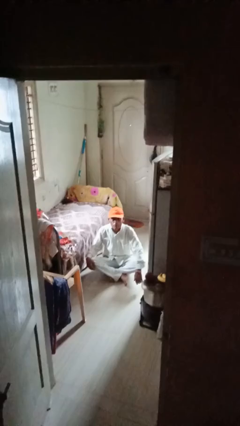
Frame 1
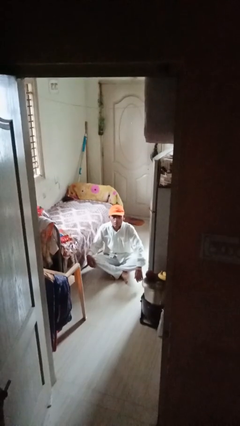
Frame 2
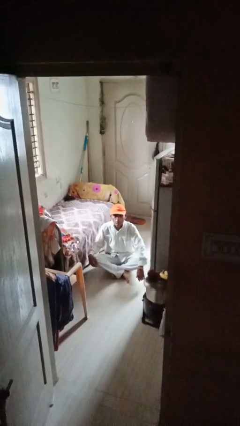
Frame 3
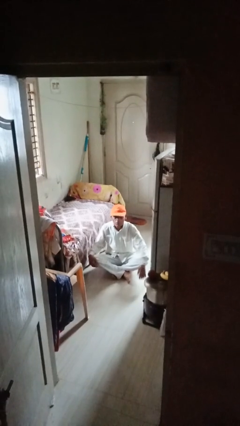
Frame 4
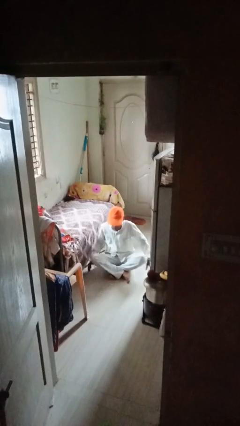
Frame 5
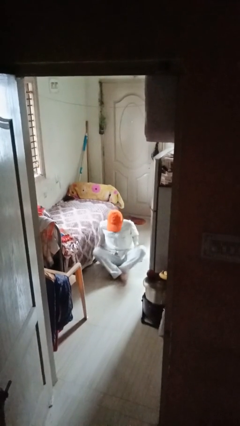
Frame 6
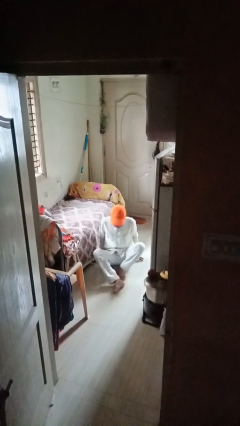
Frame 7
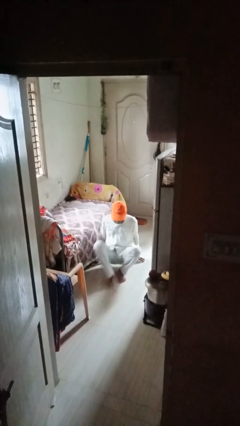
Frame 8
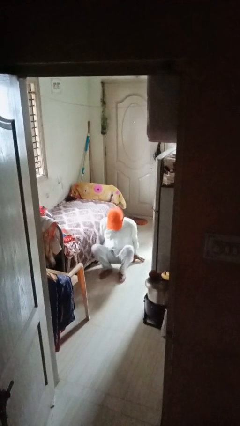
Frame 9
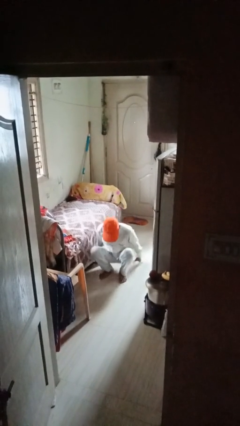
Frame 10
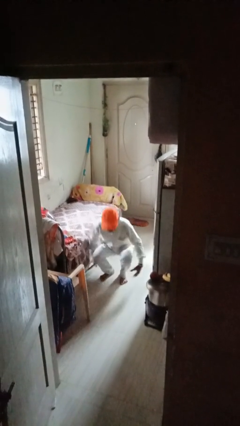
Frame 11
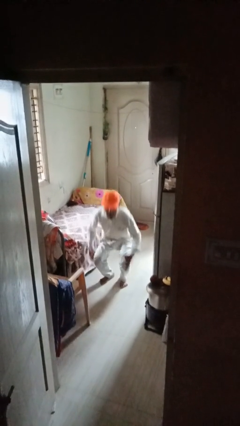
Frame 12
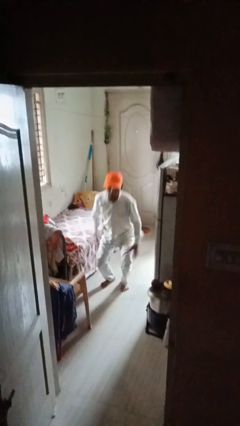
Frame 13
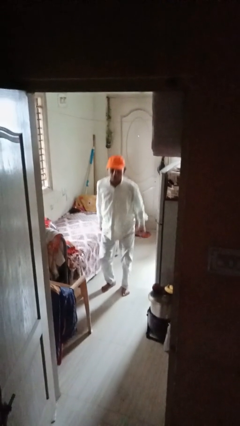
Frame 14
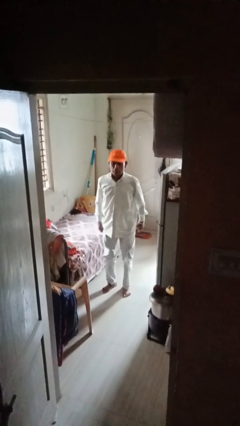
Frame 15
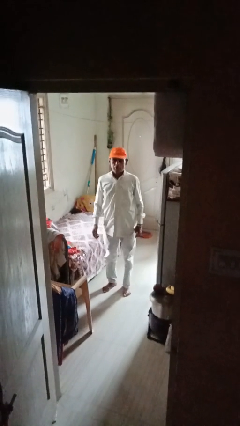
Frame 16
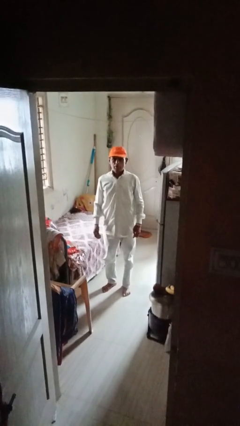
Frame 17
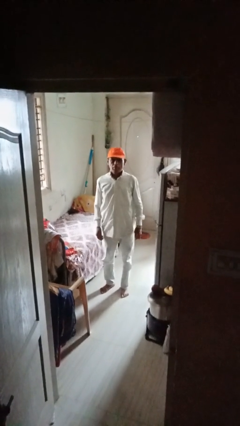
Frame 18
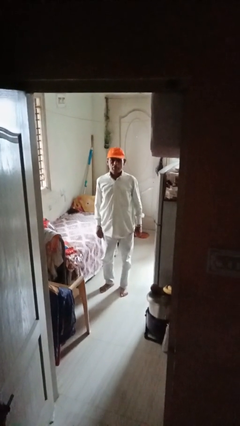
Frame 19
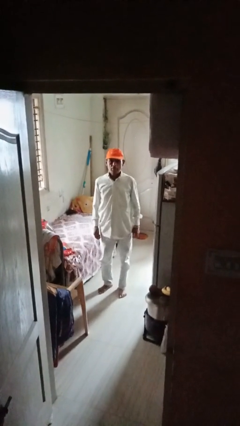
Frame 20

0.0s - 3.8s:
person stands up from floor

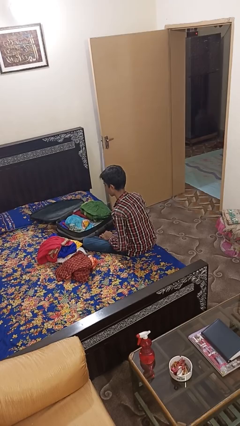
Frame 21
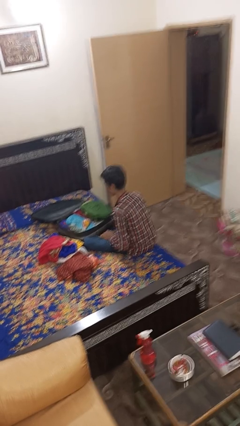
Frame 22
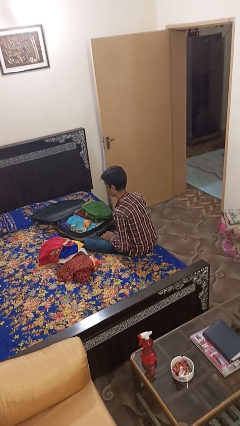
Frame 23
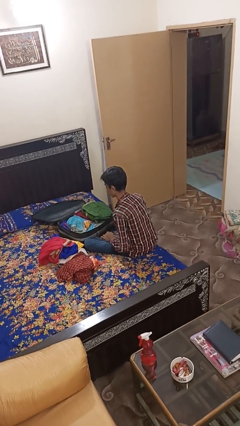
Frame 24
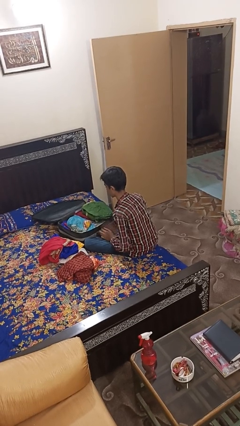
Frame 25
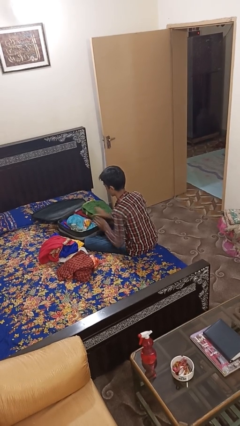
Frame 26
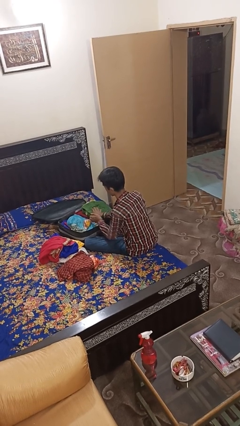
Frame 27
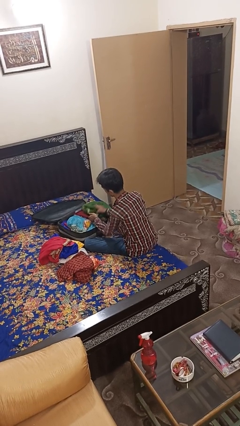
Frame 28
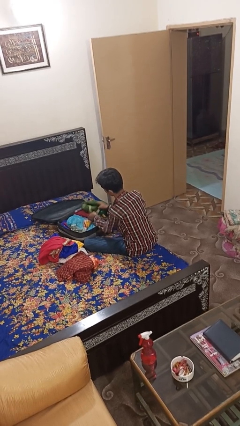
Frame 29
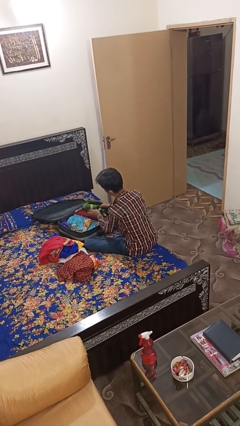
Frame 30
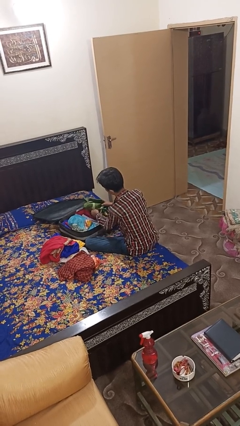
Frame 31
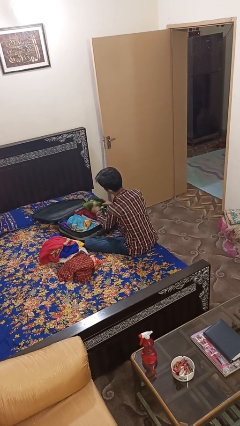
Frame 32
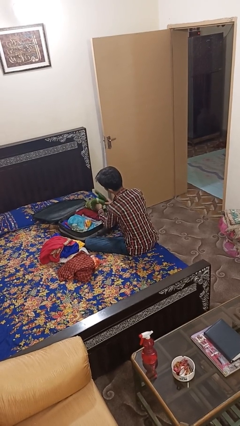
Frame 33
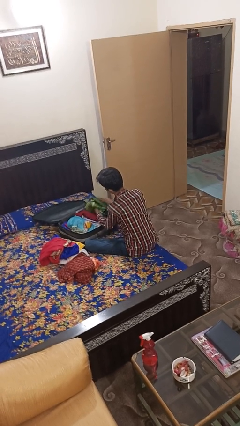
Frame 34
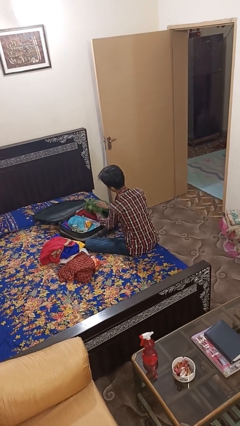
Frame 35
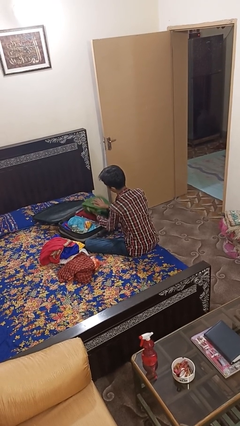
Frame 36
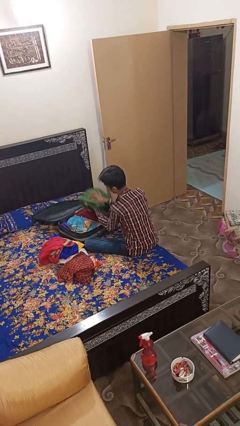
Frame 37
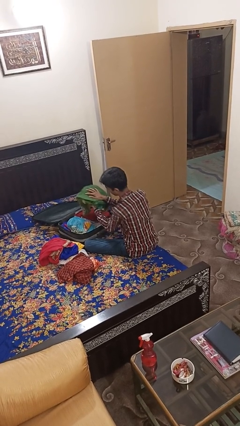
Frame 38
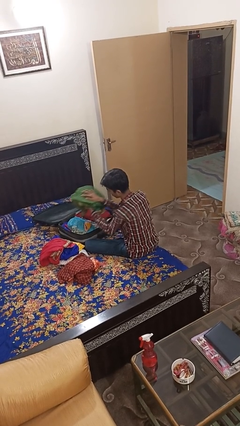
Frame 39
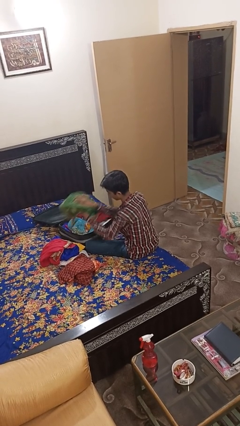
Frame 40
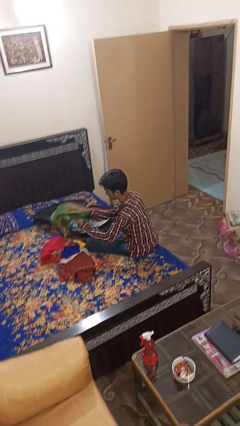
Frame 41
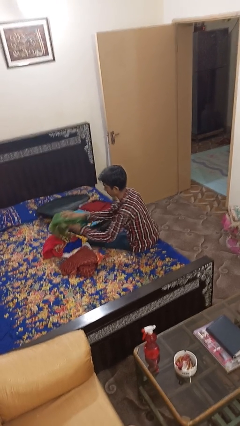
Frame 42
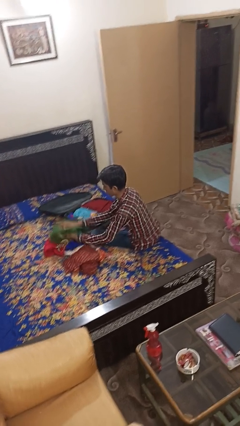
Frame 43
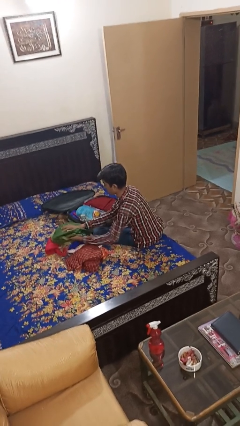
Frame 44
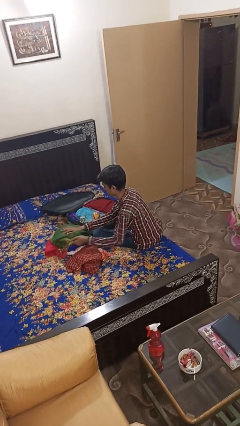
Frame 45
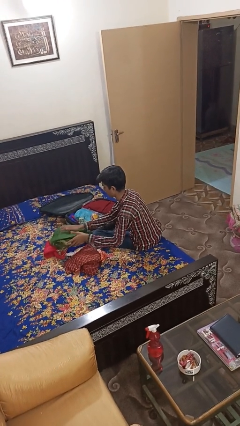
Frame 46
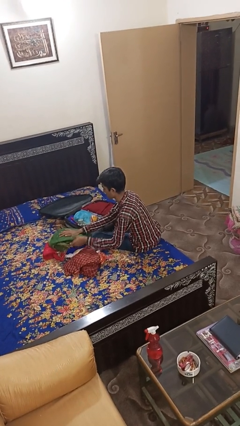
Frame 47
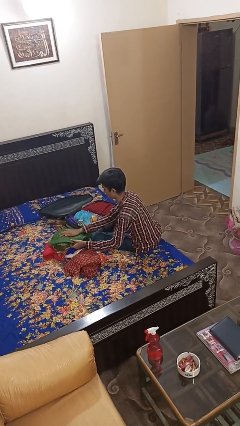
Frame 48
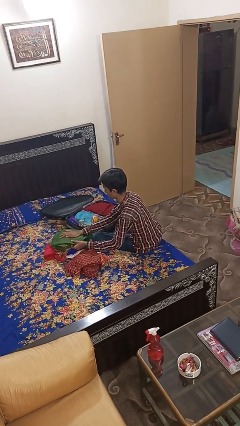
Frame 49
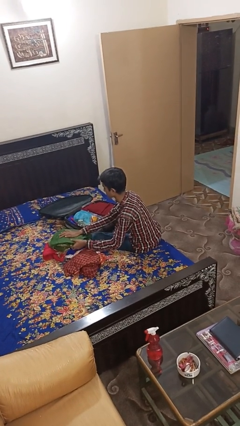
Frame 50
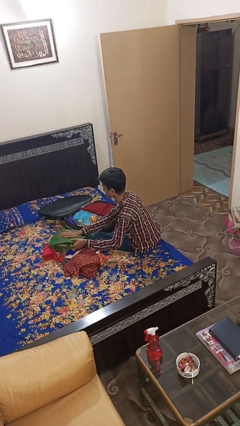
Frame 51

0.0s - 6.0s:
person unloads clothes from suitcase

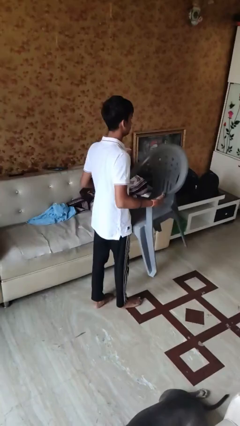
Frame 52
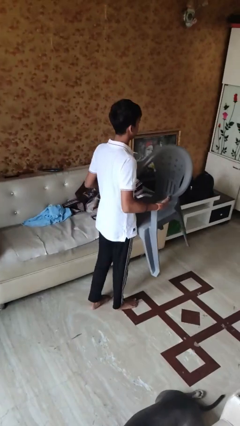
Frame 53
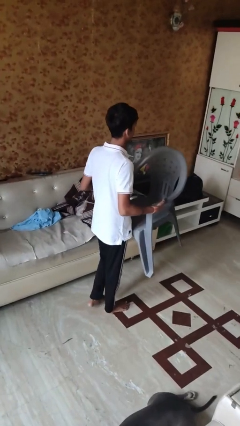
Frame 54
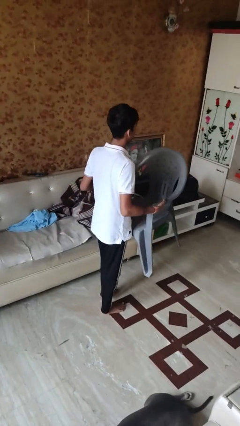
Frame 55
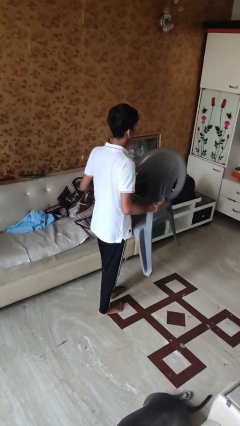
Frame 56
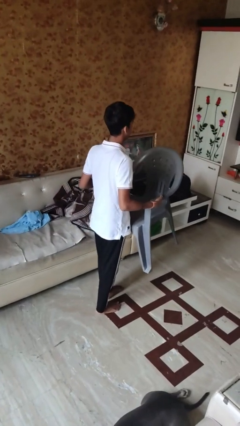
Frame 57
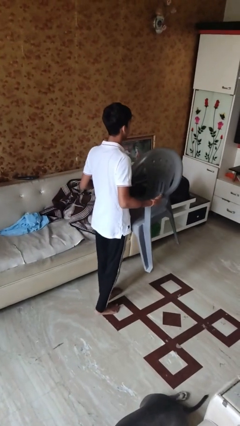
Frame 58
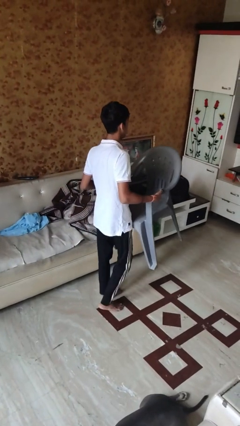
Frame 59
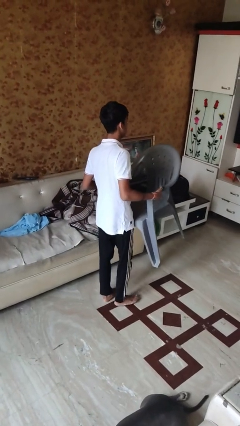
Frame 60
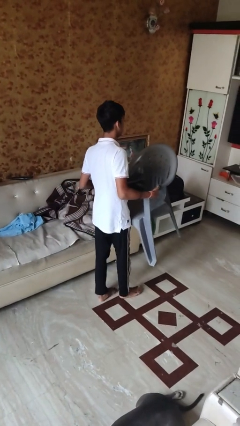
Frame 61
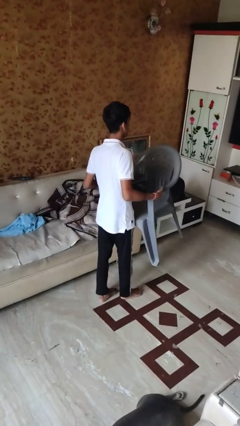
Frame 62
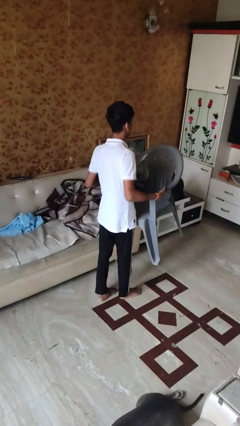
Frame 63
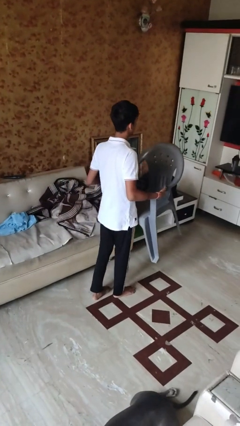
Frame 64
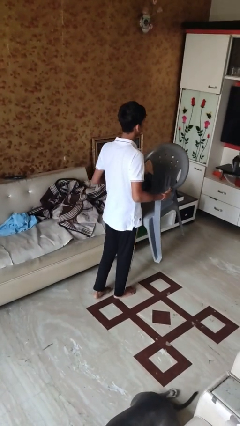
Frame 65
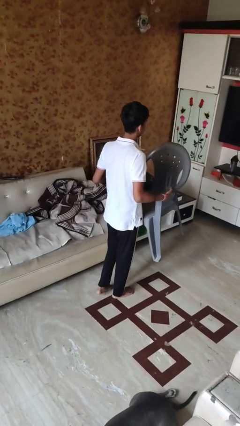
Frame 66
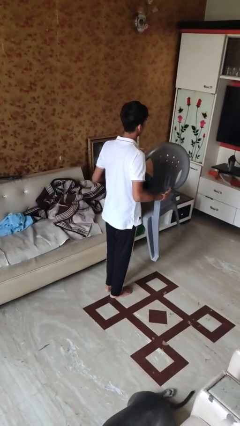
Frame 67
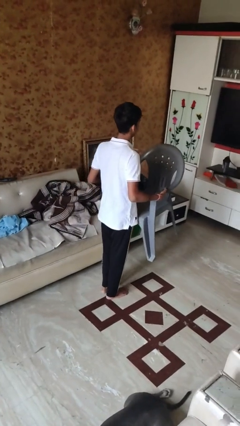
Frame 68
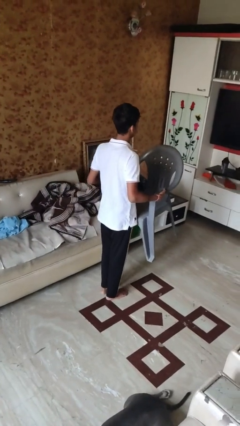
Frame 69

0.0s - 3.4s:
person carries furniture

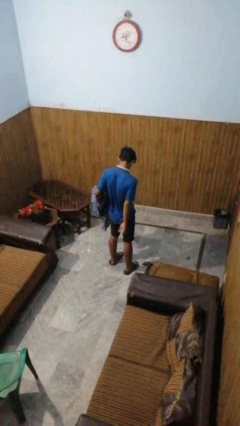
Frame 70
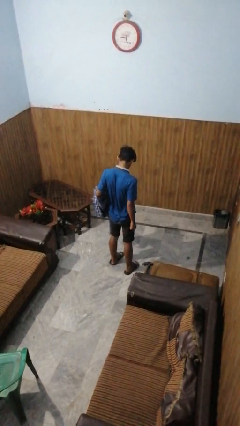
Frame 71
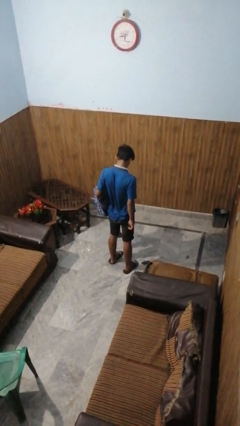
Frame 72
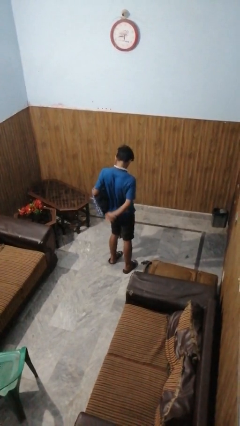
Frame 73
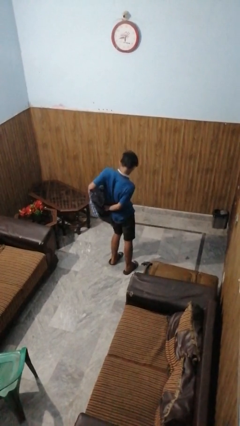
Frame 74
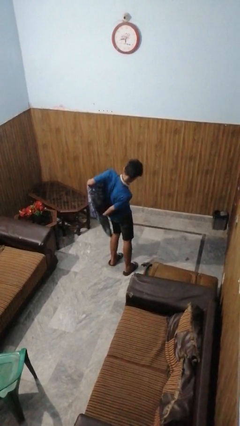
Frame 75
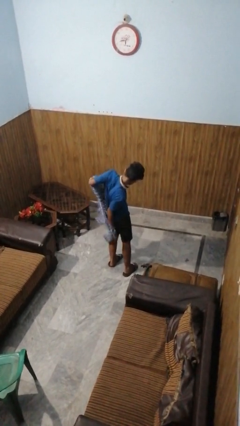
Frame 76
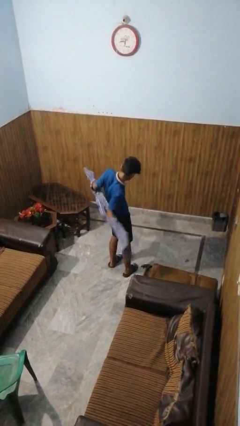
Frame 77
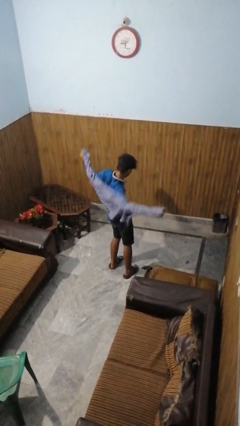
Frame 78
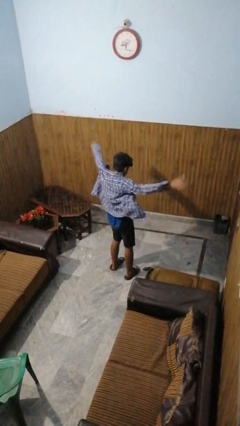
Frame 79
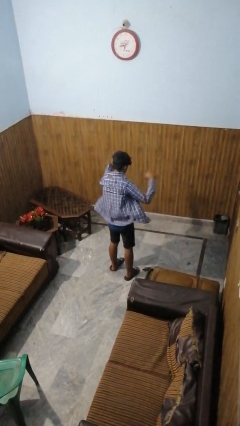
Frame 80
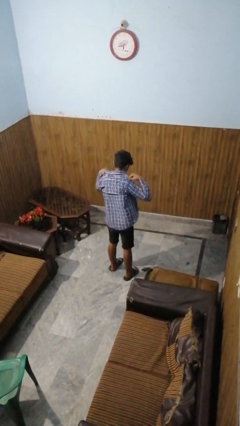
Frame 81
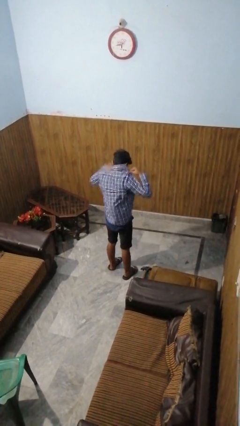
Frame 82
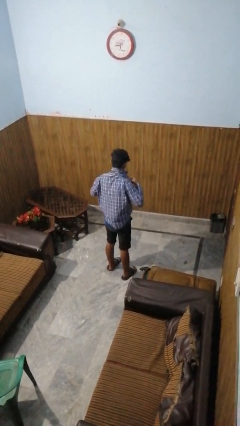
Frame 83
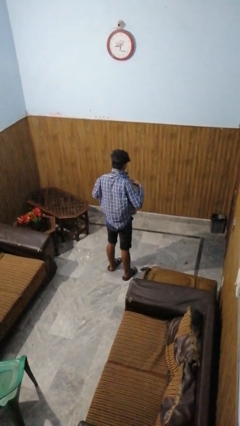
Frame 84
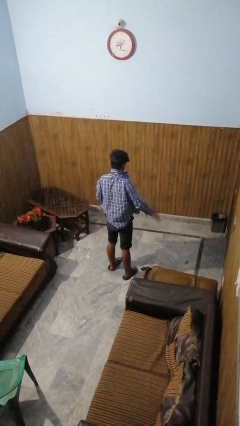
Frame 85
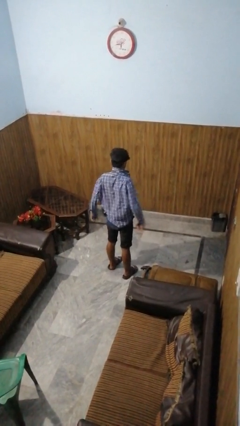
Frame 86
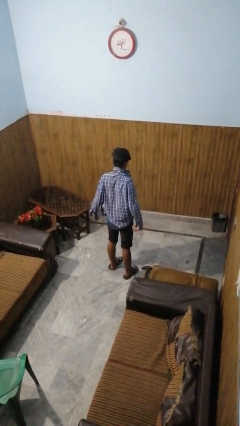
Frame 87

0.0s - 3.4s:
person puts on shirt

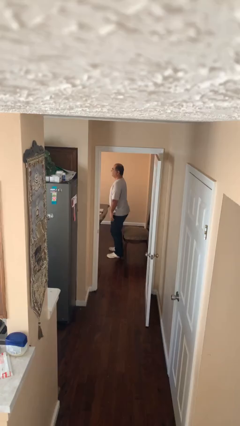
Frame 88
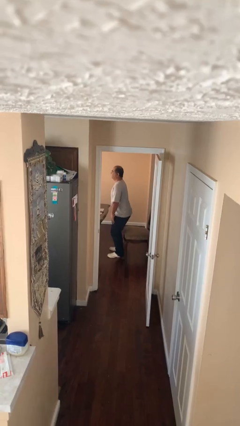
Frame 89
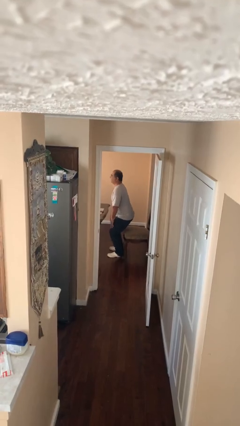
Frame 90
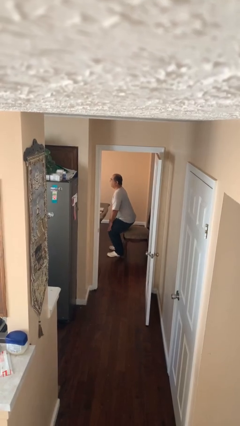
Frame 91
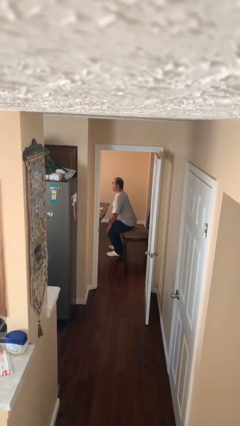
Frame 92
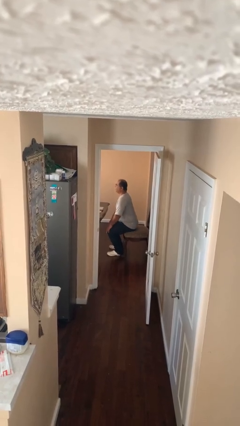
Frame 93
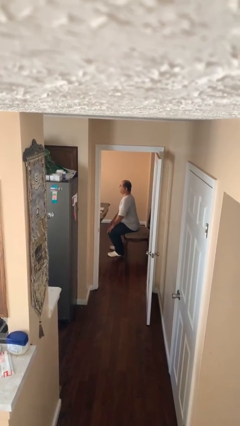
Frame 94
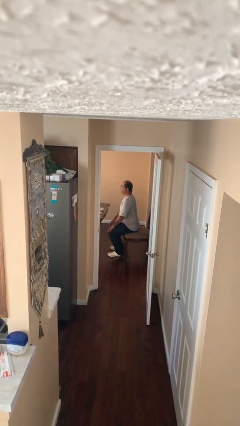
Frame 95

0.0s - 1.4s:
person sits down
